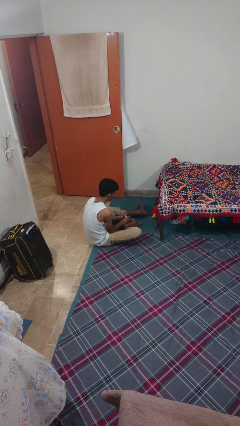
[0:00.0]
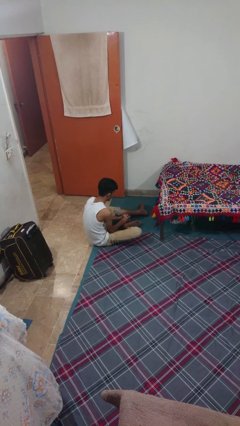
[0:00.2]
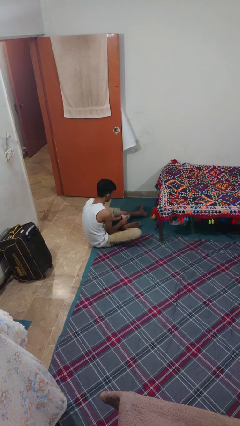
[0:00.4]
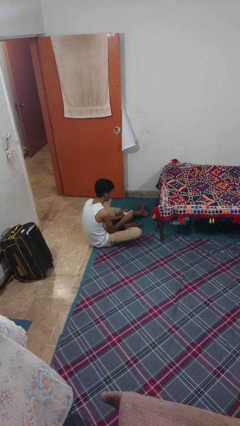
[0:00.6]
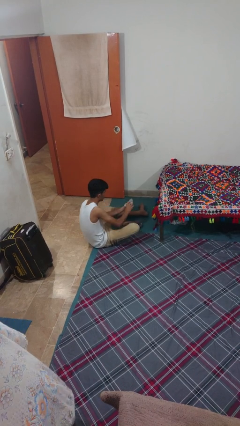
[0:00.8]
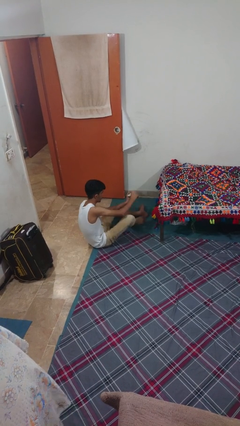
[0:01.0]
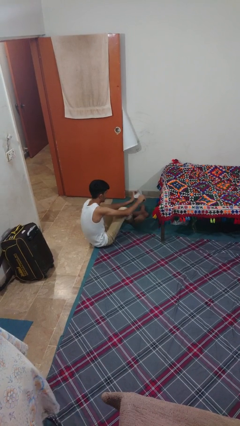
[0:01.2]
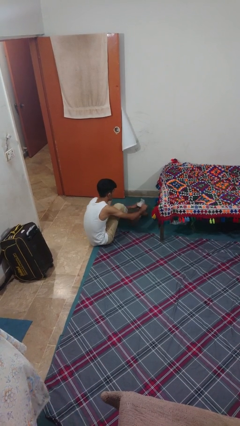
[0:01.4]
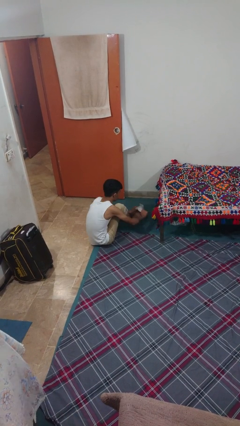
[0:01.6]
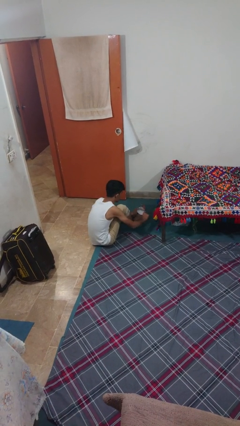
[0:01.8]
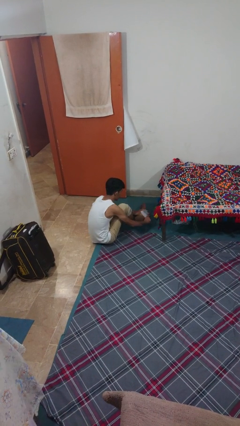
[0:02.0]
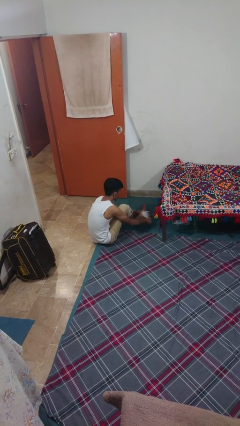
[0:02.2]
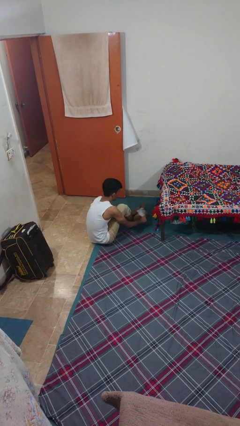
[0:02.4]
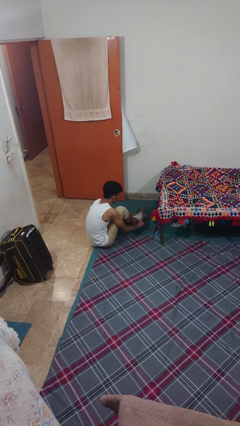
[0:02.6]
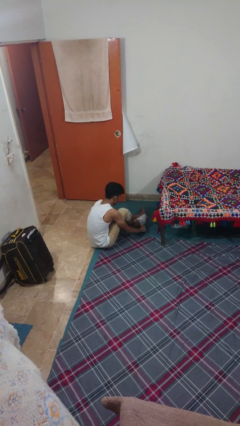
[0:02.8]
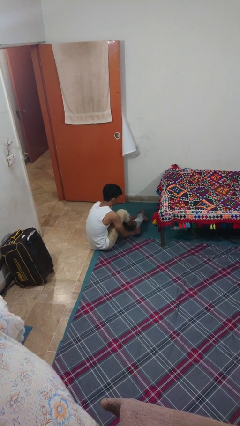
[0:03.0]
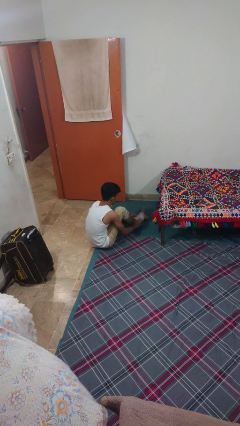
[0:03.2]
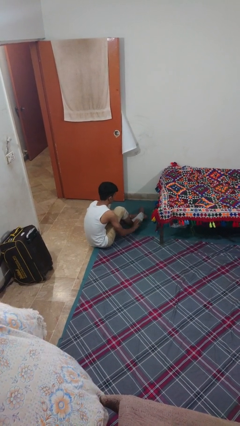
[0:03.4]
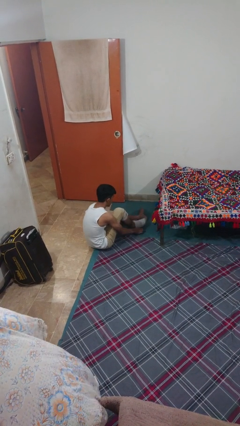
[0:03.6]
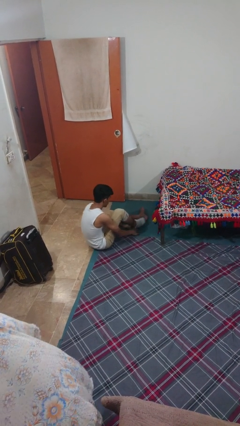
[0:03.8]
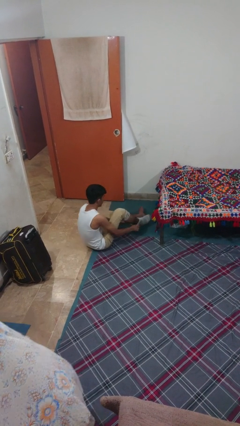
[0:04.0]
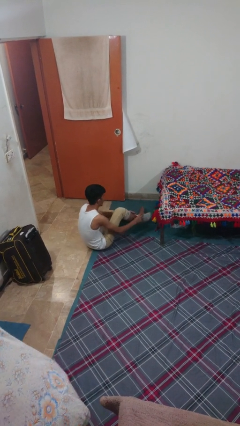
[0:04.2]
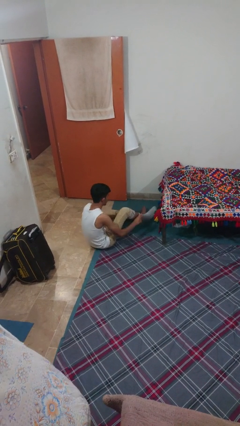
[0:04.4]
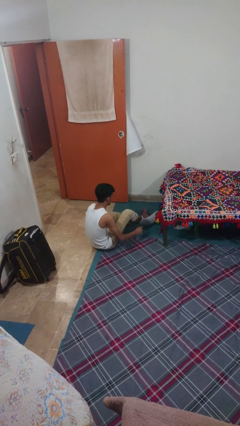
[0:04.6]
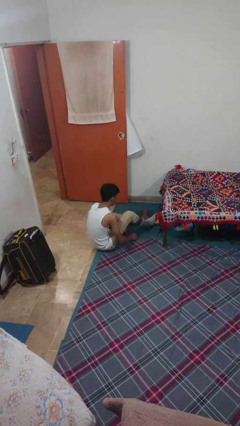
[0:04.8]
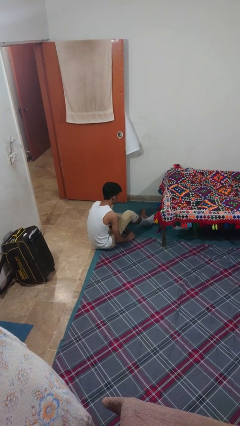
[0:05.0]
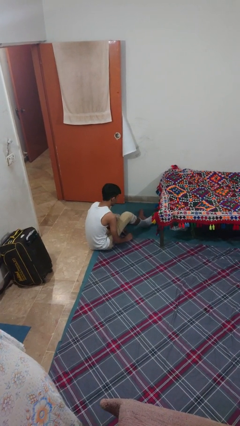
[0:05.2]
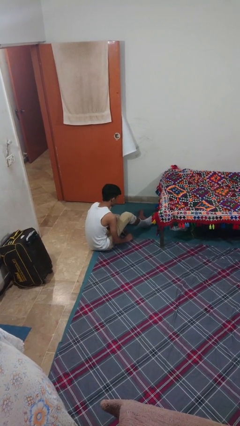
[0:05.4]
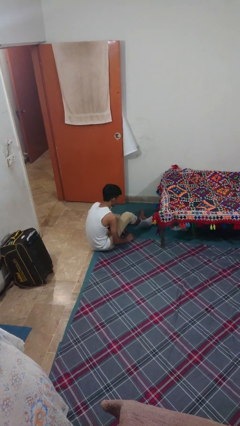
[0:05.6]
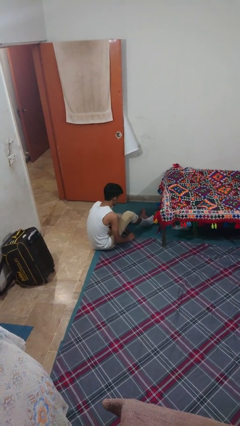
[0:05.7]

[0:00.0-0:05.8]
person puts on socks

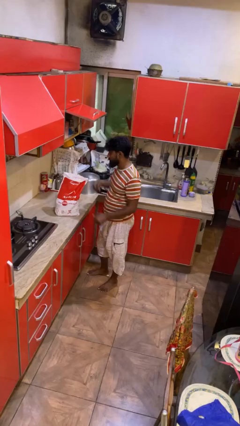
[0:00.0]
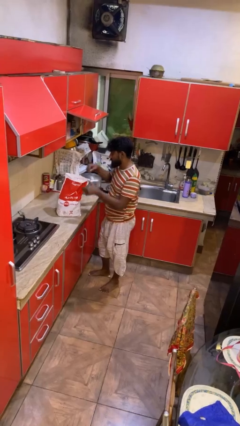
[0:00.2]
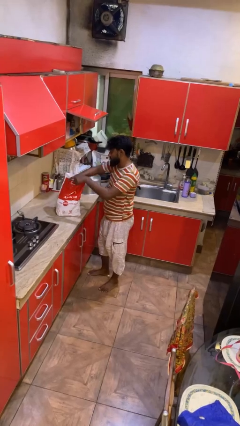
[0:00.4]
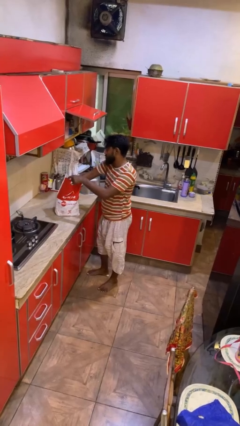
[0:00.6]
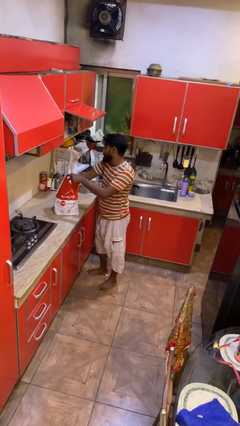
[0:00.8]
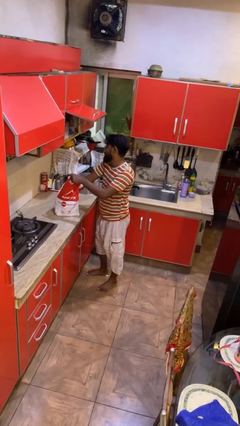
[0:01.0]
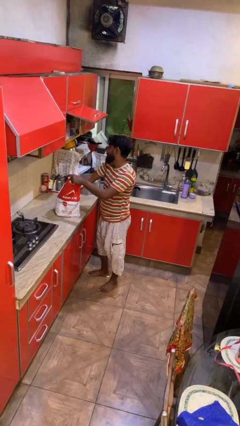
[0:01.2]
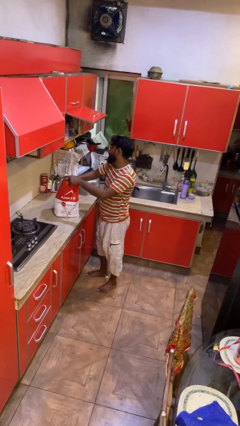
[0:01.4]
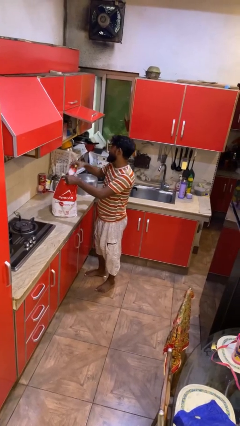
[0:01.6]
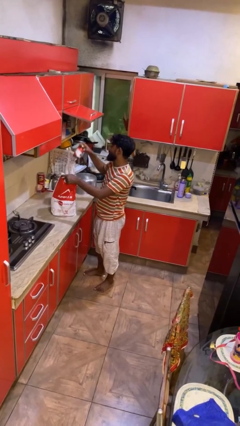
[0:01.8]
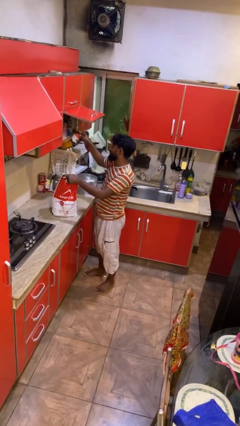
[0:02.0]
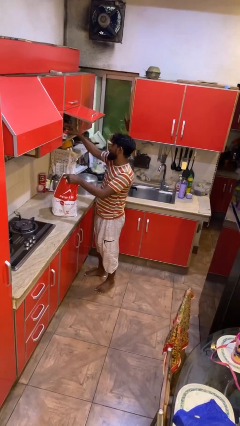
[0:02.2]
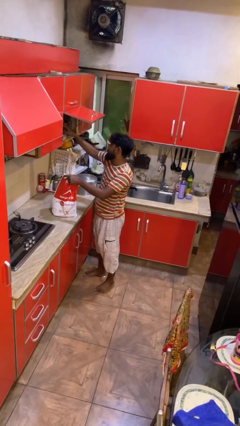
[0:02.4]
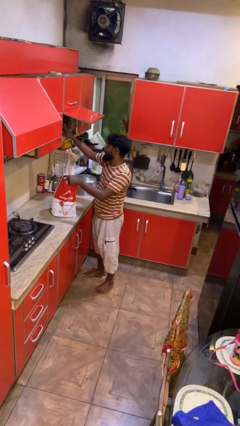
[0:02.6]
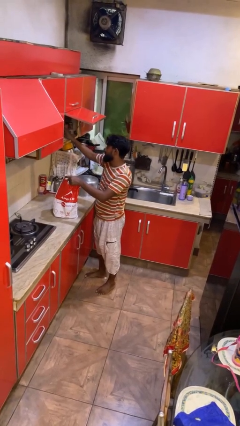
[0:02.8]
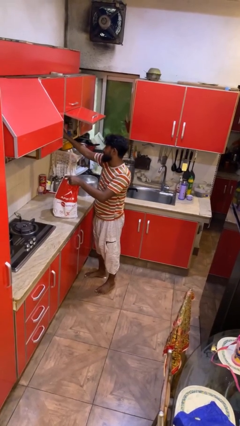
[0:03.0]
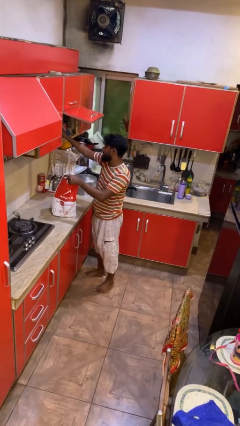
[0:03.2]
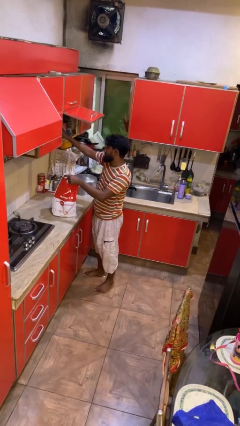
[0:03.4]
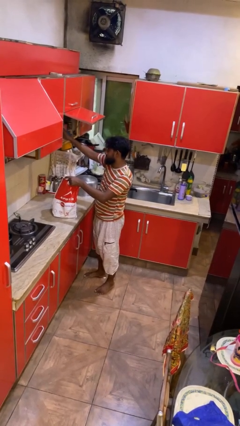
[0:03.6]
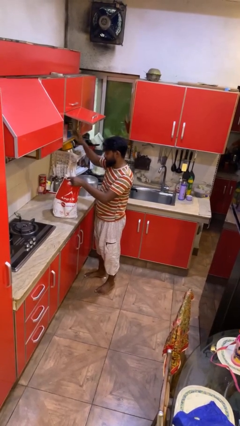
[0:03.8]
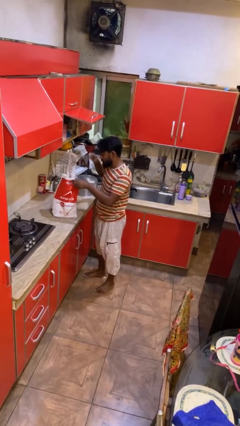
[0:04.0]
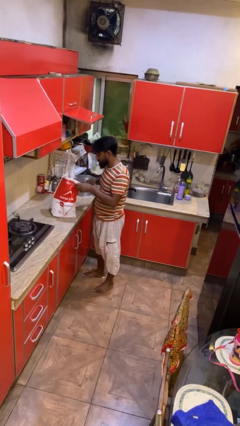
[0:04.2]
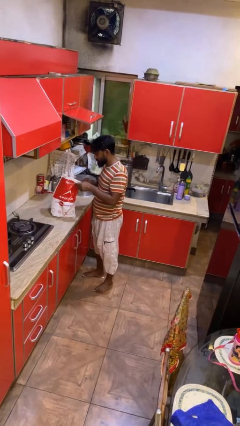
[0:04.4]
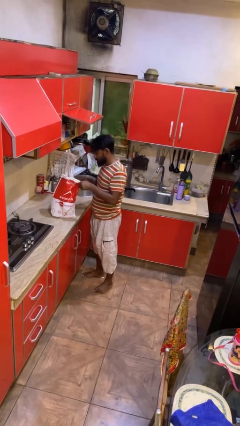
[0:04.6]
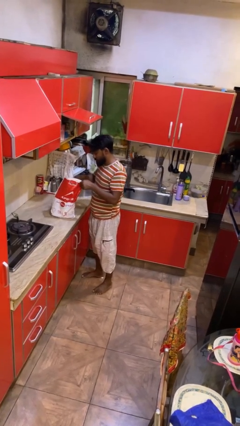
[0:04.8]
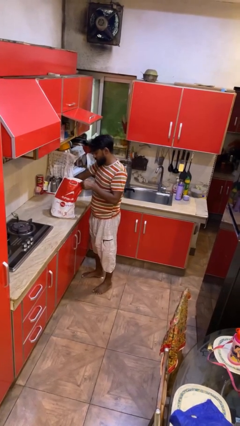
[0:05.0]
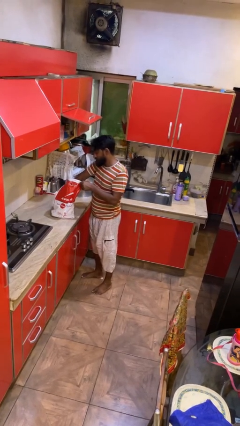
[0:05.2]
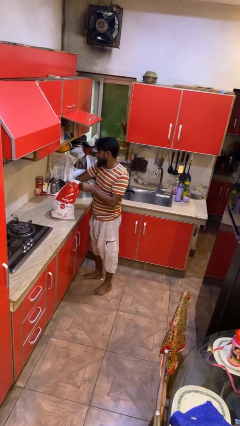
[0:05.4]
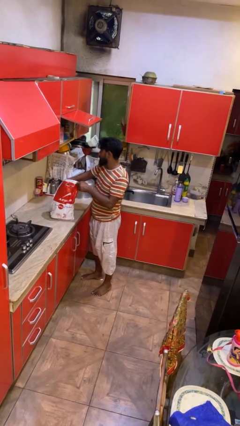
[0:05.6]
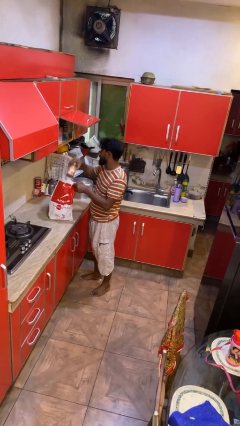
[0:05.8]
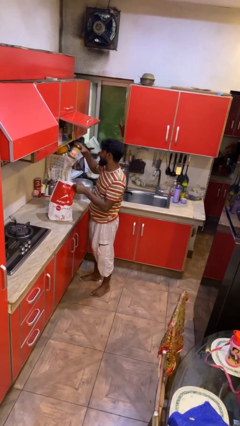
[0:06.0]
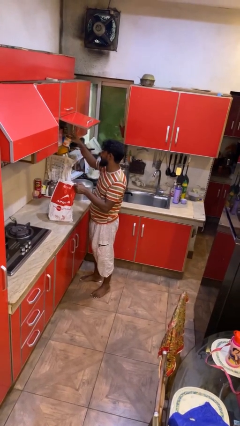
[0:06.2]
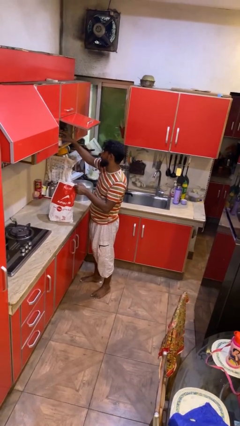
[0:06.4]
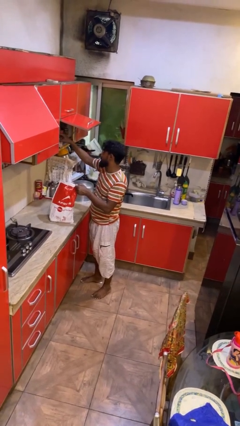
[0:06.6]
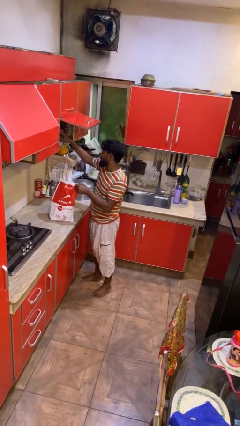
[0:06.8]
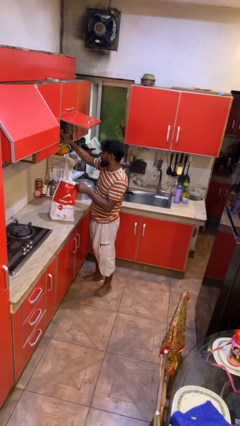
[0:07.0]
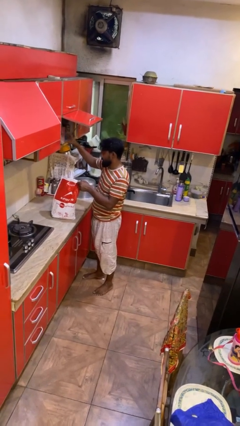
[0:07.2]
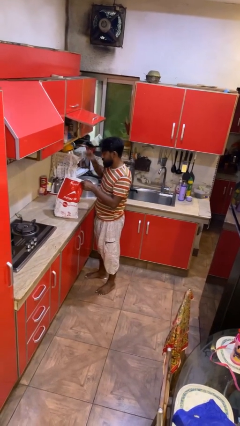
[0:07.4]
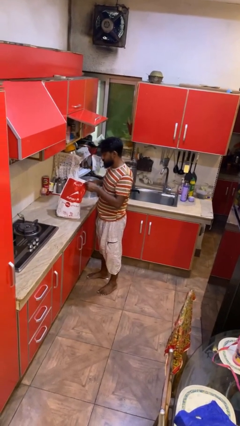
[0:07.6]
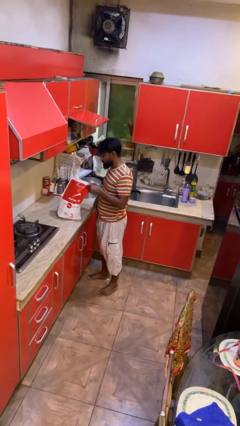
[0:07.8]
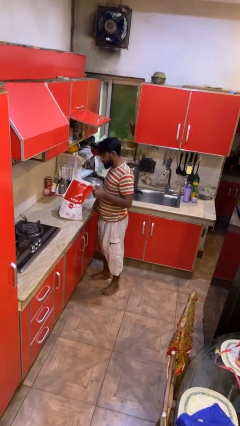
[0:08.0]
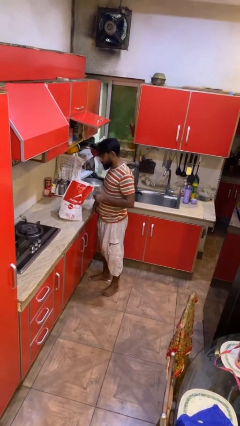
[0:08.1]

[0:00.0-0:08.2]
person loads groceries into cabinet

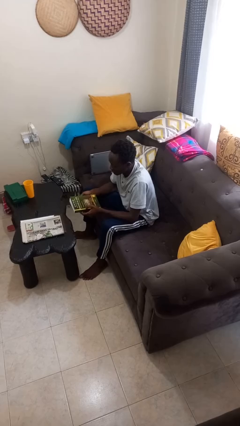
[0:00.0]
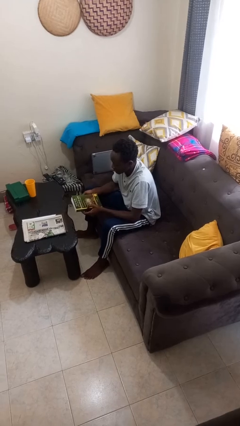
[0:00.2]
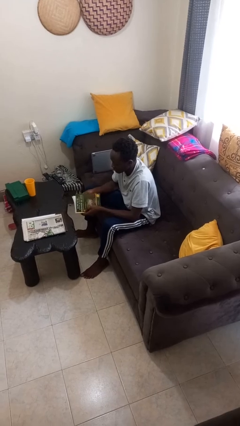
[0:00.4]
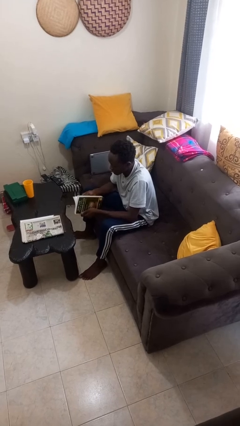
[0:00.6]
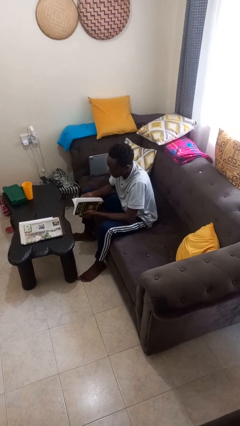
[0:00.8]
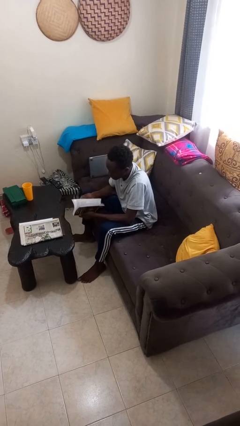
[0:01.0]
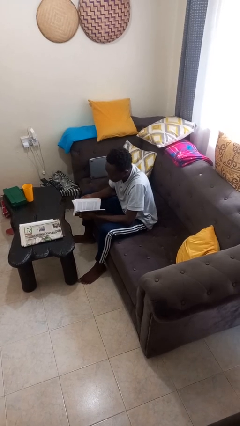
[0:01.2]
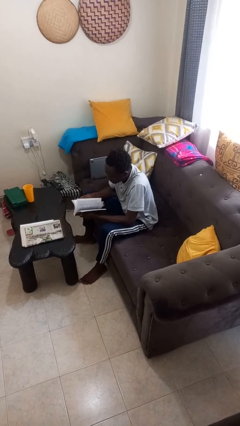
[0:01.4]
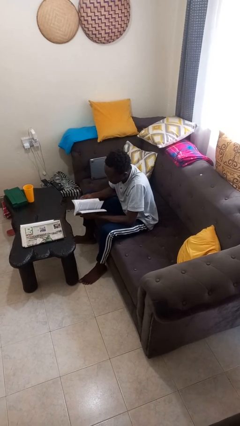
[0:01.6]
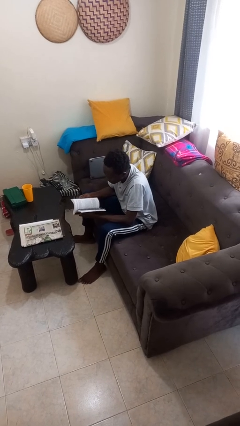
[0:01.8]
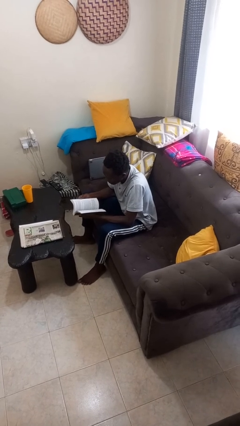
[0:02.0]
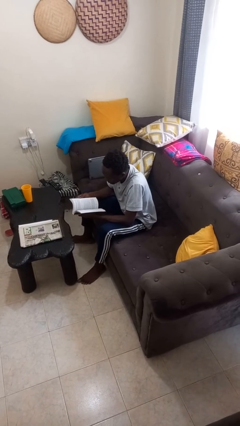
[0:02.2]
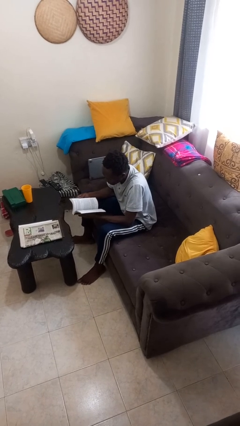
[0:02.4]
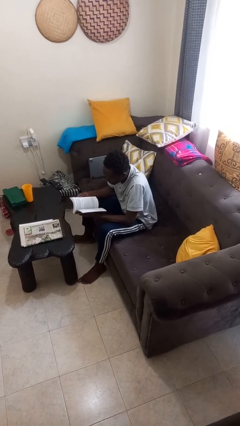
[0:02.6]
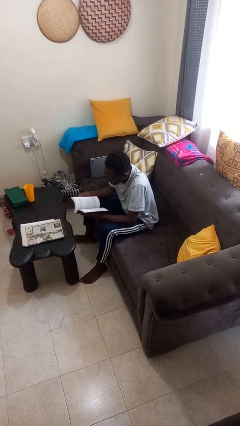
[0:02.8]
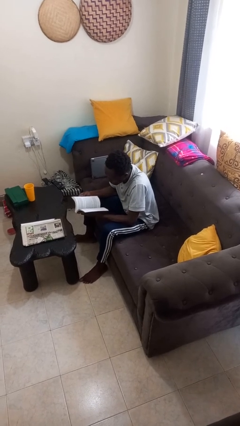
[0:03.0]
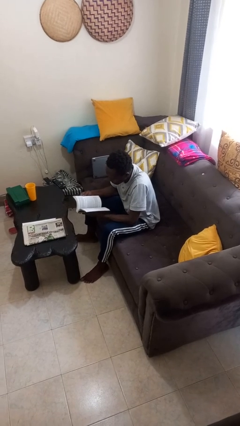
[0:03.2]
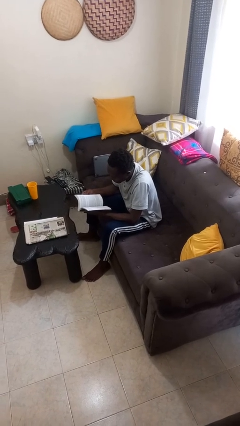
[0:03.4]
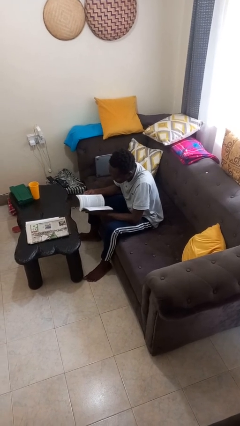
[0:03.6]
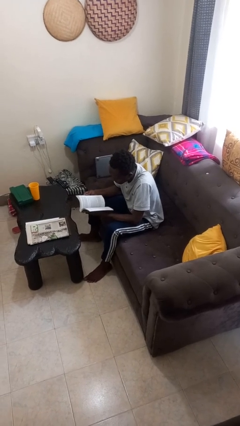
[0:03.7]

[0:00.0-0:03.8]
person reads book
